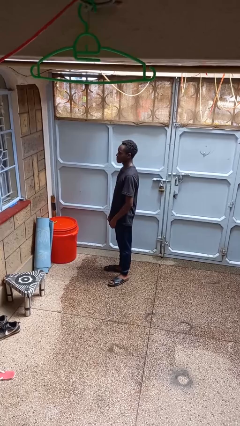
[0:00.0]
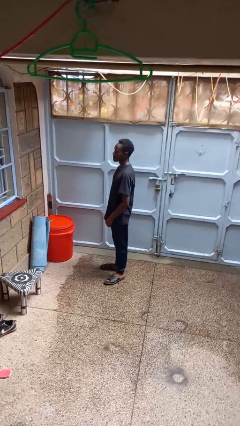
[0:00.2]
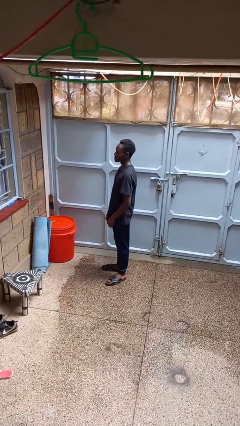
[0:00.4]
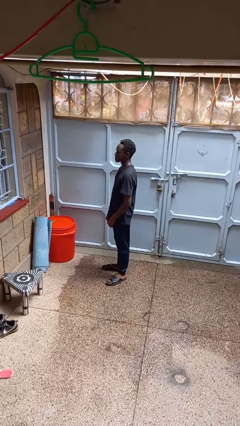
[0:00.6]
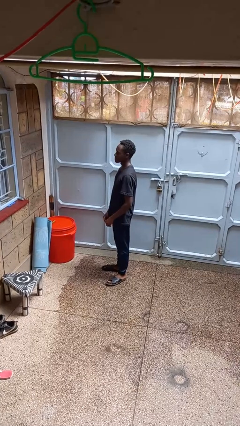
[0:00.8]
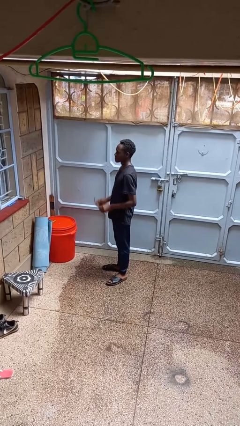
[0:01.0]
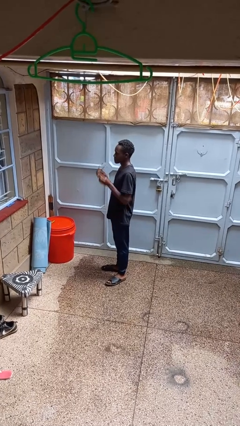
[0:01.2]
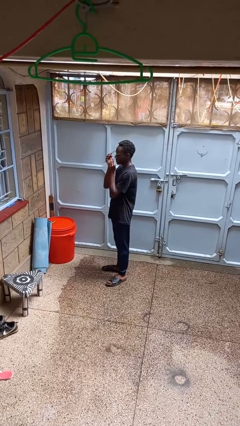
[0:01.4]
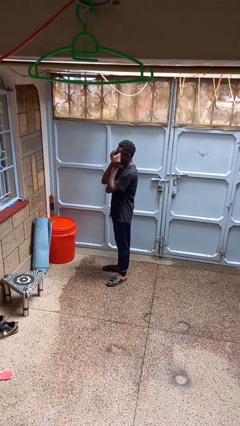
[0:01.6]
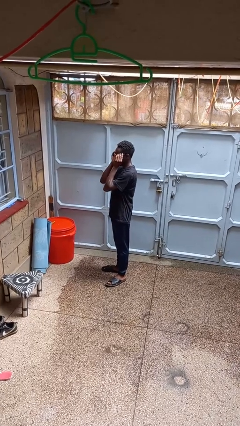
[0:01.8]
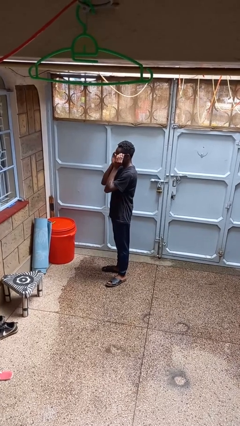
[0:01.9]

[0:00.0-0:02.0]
person puts on glasses

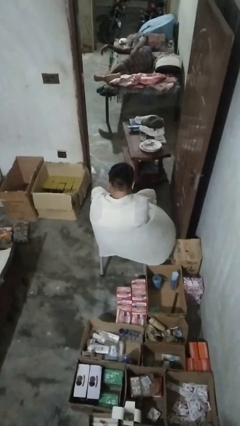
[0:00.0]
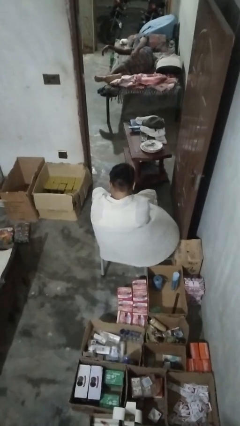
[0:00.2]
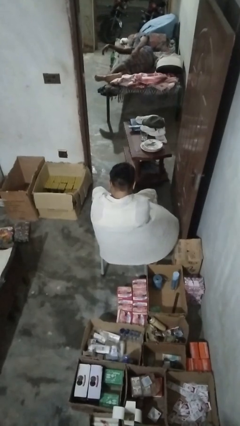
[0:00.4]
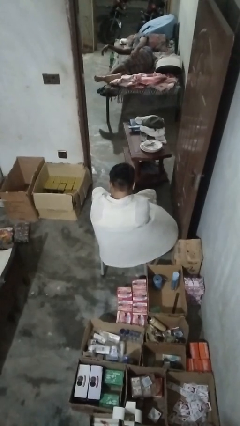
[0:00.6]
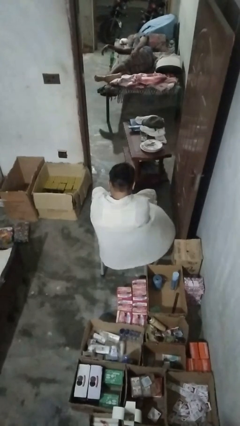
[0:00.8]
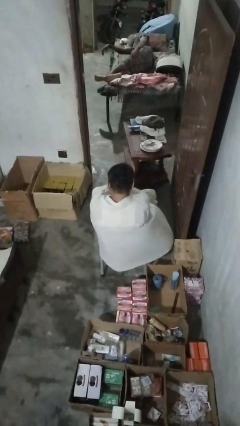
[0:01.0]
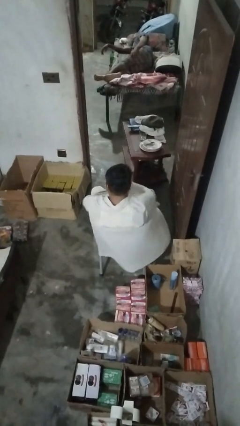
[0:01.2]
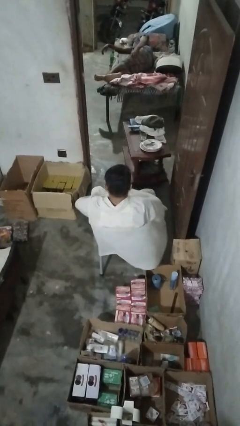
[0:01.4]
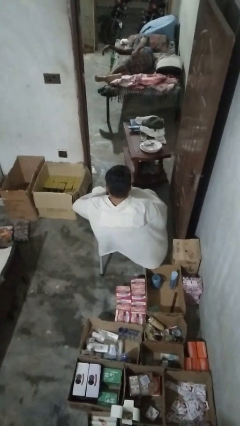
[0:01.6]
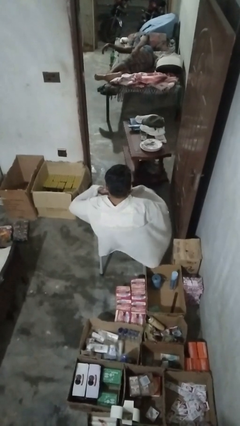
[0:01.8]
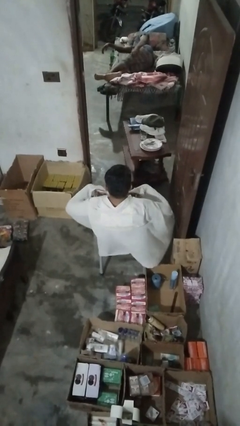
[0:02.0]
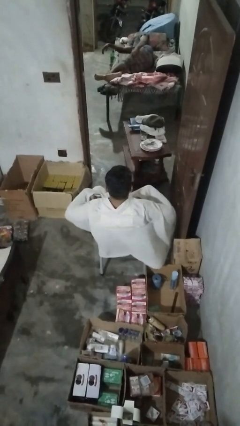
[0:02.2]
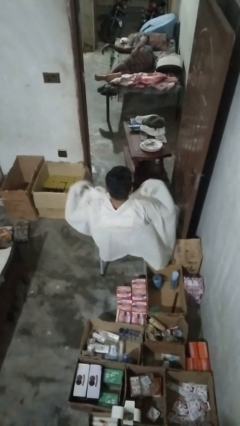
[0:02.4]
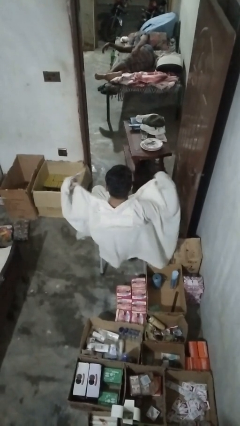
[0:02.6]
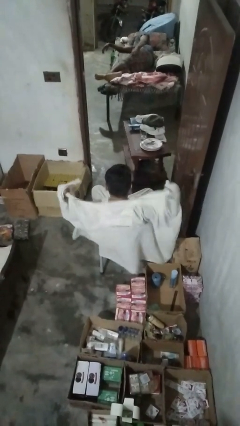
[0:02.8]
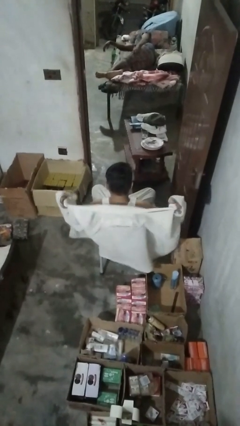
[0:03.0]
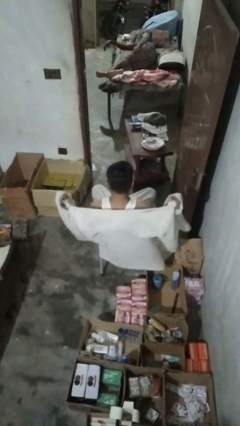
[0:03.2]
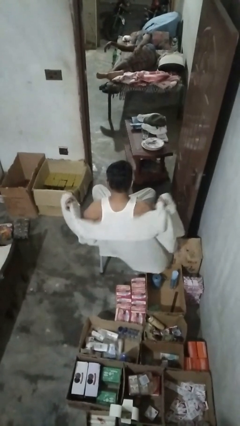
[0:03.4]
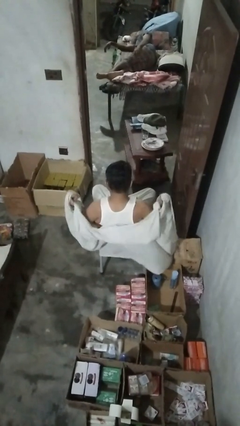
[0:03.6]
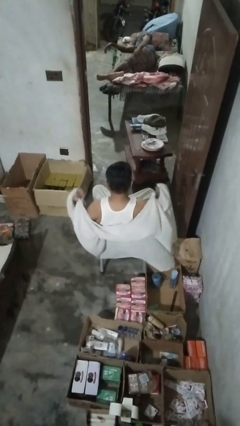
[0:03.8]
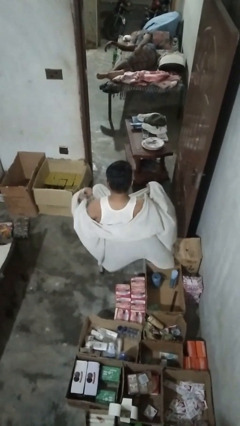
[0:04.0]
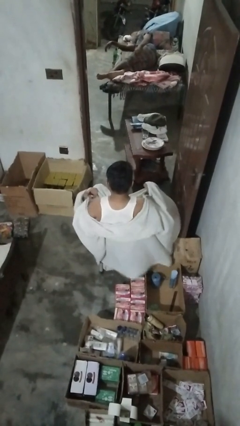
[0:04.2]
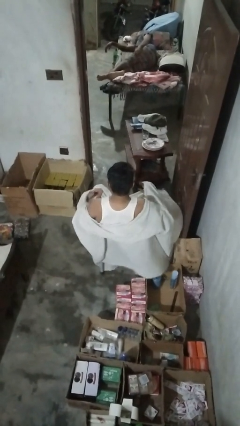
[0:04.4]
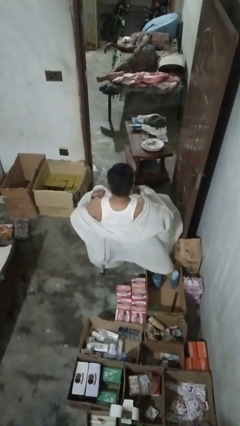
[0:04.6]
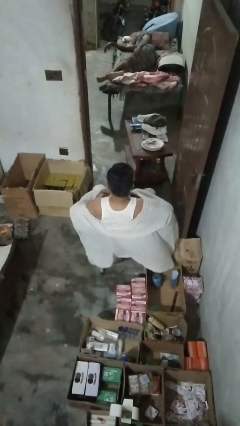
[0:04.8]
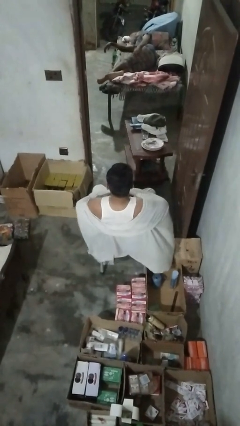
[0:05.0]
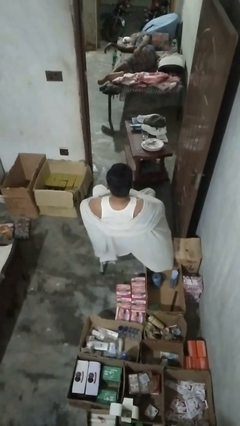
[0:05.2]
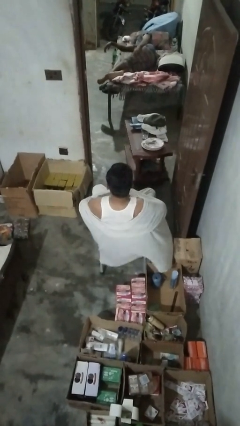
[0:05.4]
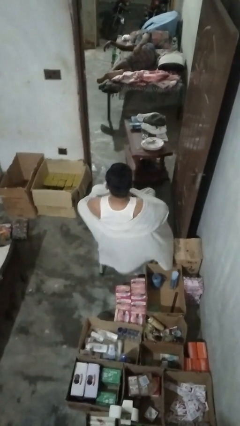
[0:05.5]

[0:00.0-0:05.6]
person uncovers with blanket

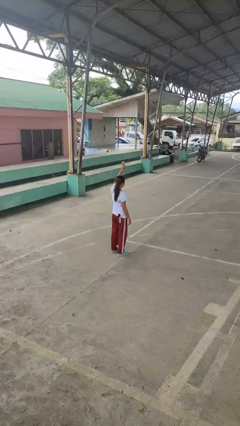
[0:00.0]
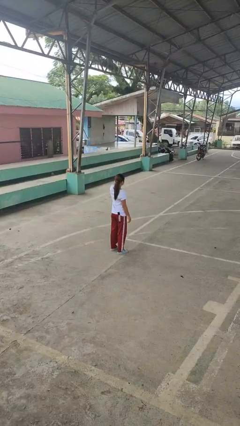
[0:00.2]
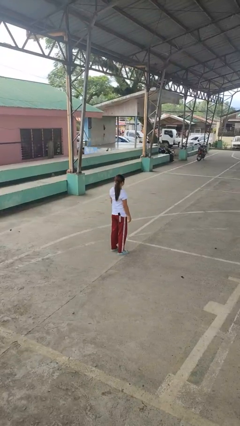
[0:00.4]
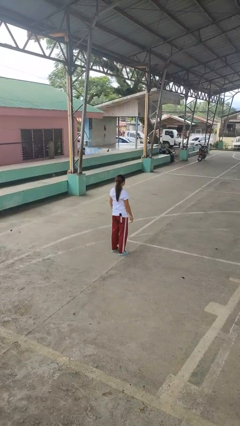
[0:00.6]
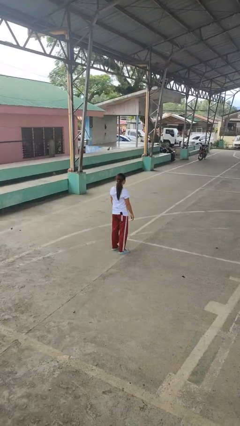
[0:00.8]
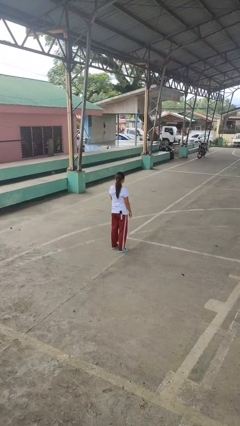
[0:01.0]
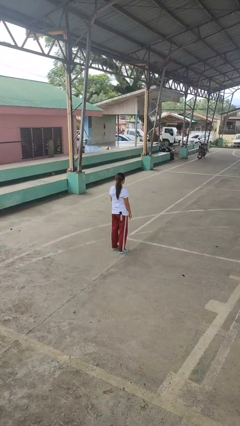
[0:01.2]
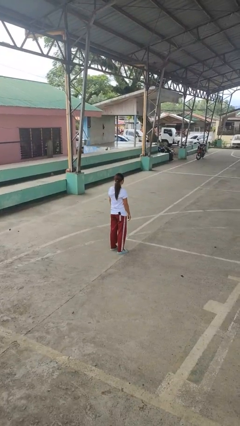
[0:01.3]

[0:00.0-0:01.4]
person gestures lower hand

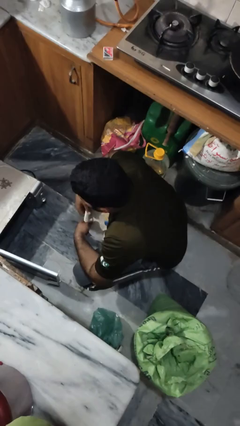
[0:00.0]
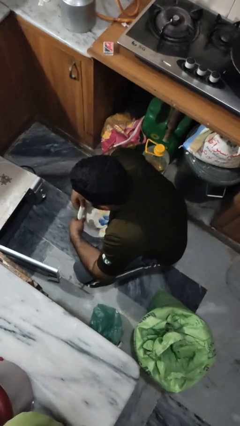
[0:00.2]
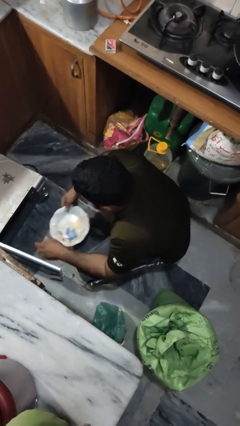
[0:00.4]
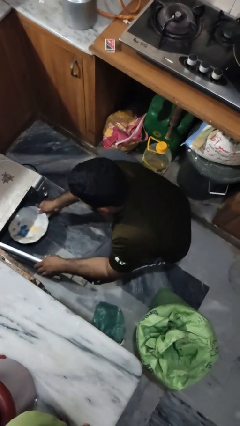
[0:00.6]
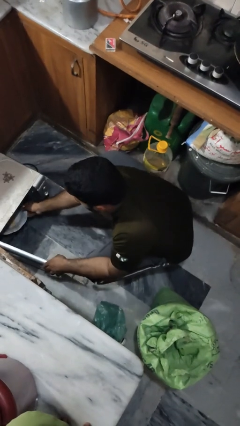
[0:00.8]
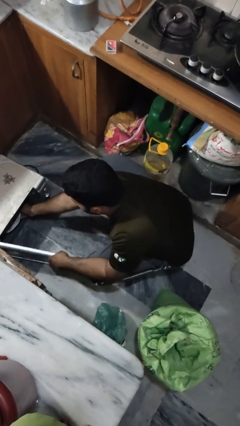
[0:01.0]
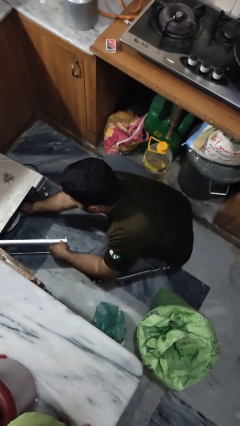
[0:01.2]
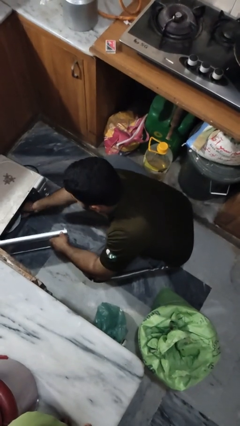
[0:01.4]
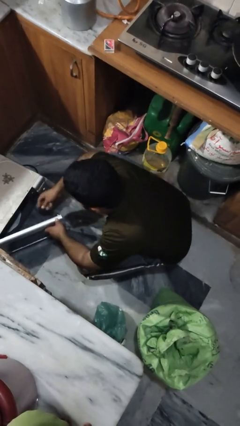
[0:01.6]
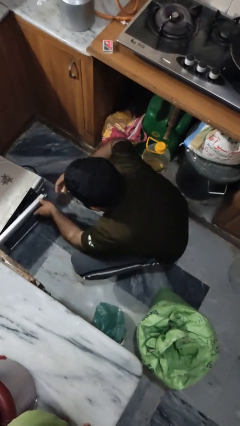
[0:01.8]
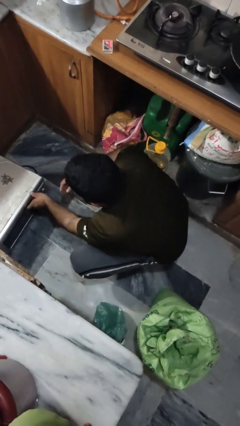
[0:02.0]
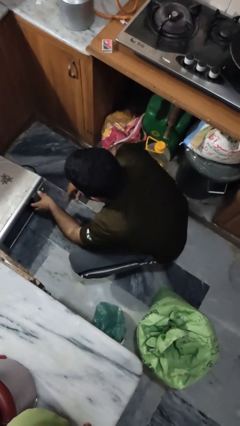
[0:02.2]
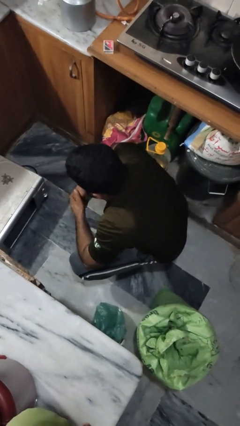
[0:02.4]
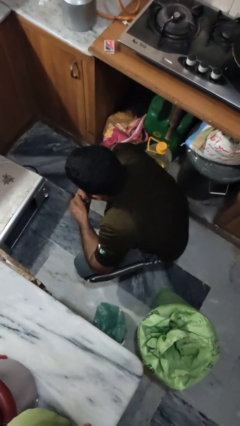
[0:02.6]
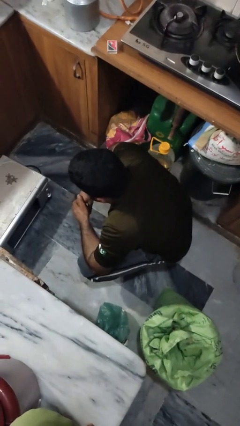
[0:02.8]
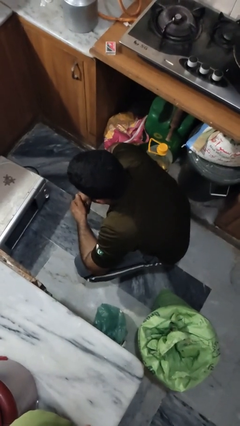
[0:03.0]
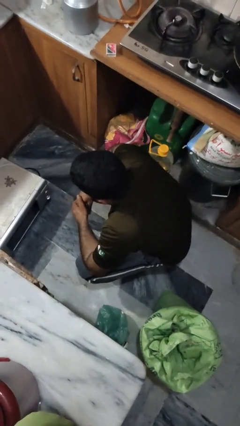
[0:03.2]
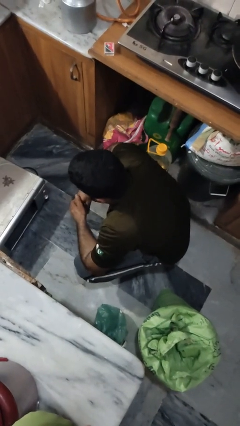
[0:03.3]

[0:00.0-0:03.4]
person puts object into oven

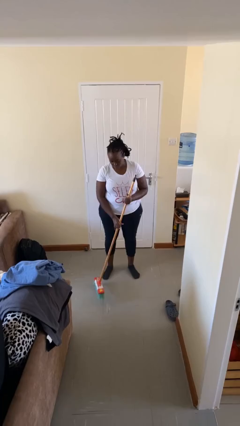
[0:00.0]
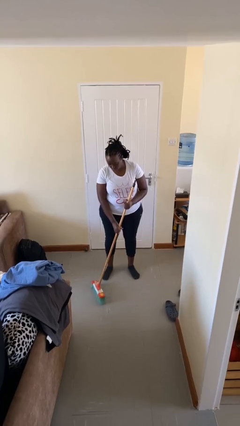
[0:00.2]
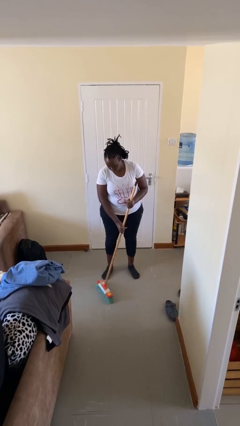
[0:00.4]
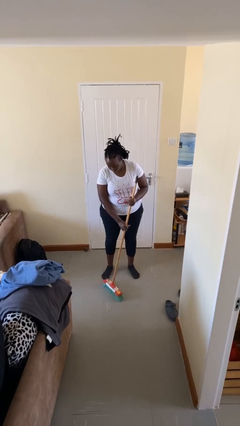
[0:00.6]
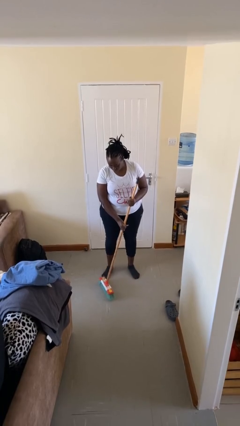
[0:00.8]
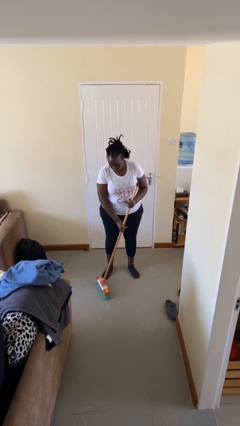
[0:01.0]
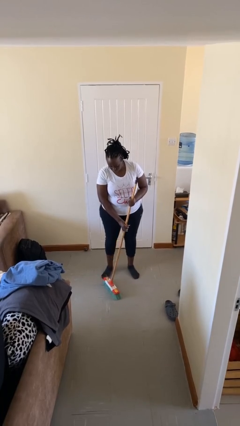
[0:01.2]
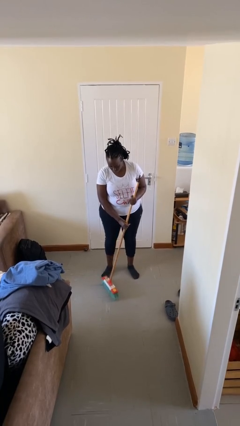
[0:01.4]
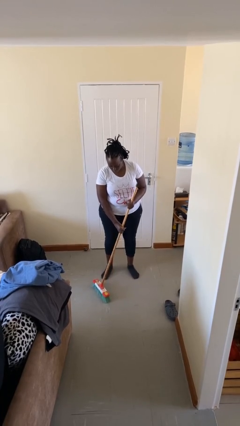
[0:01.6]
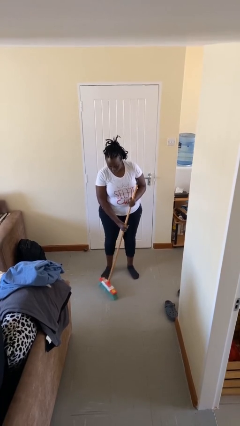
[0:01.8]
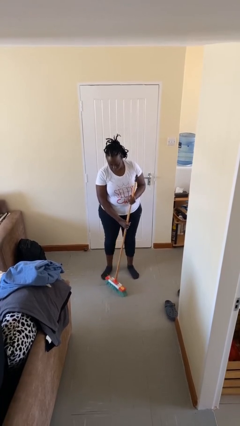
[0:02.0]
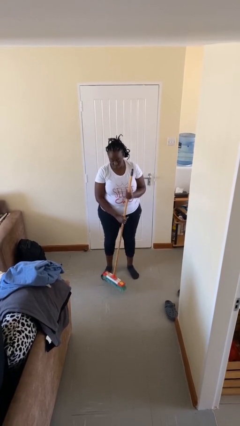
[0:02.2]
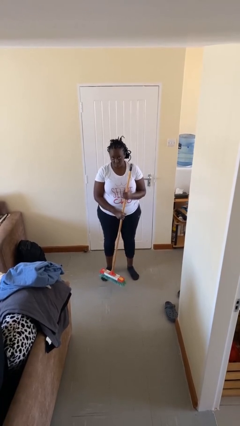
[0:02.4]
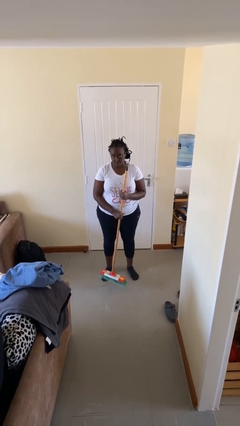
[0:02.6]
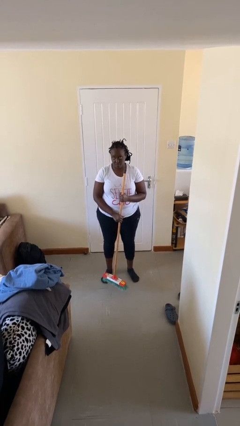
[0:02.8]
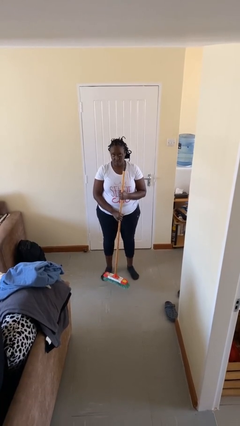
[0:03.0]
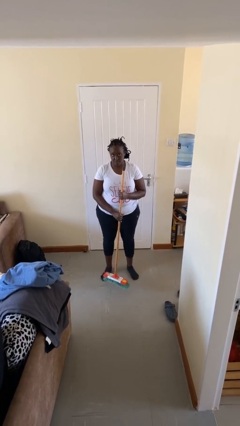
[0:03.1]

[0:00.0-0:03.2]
person sweeps floor

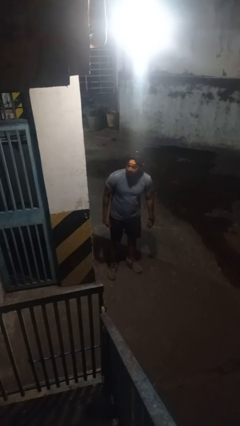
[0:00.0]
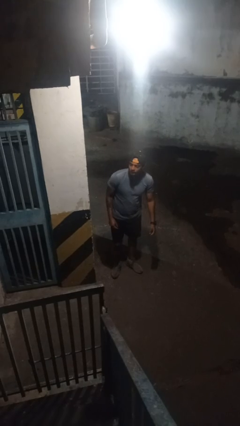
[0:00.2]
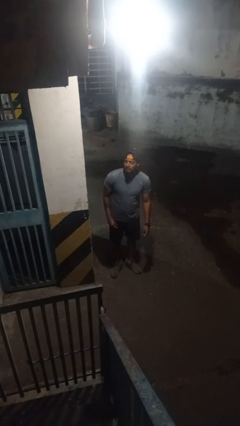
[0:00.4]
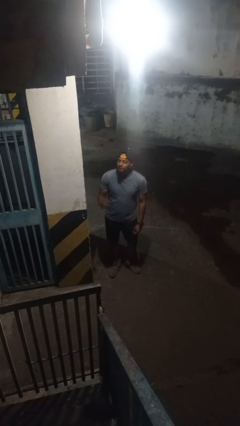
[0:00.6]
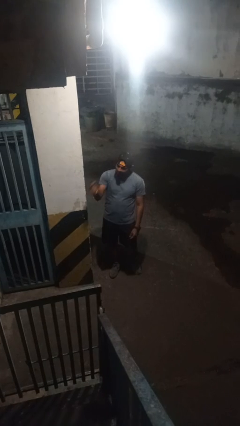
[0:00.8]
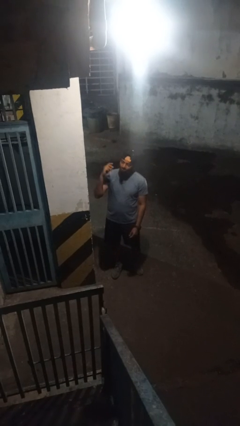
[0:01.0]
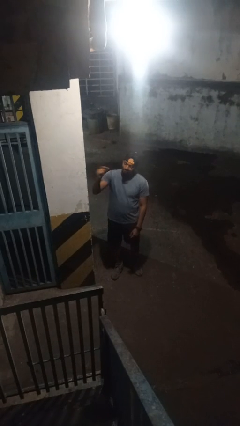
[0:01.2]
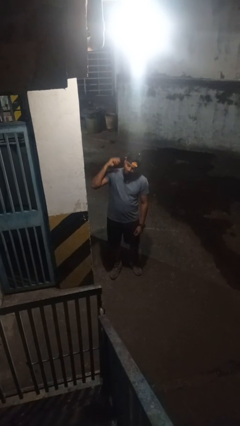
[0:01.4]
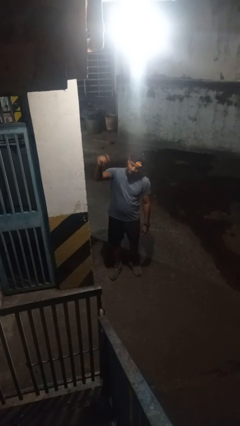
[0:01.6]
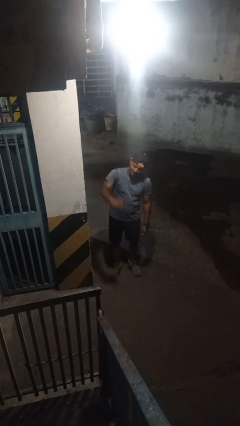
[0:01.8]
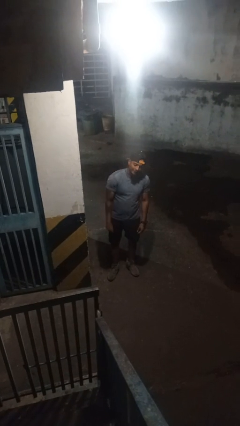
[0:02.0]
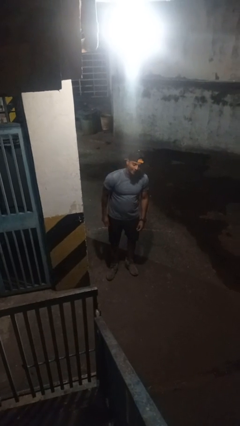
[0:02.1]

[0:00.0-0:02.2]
person snaps fingers
